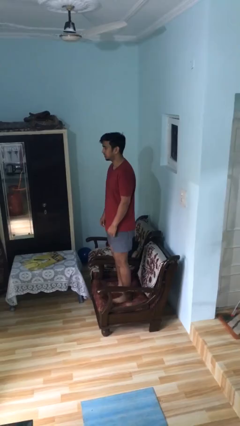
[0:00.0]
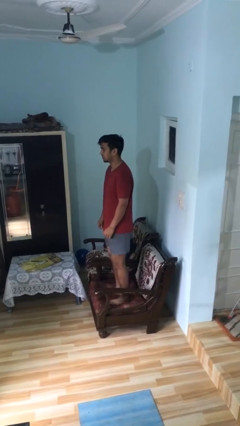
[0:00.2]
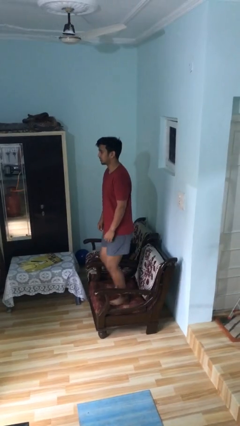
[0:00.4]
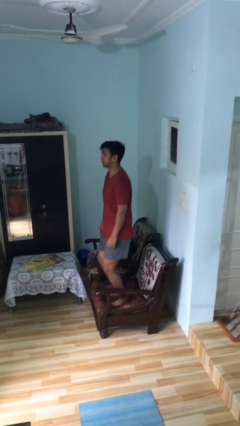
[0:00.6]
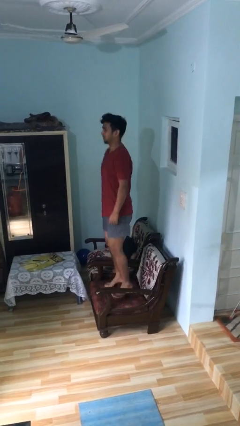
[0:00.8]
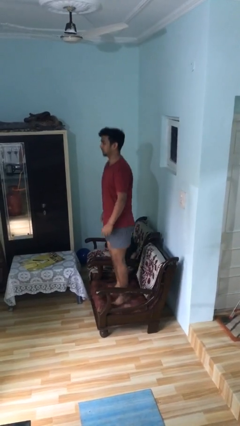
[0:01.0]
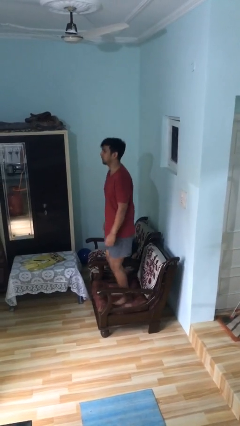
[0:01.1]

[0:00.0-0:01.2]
person jumps on couch

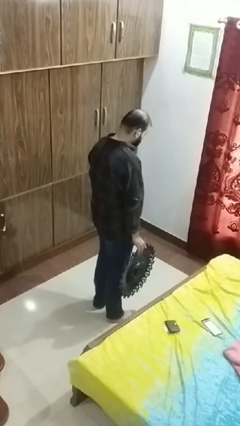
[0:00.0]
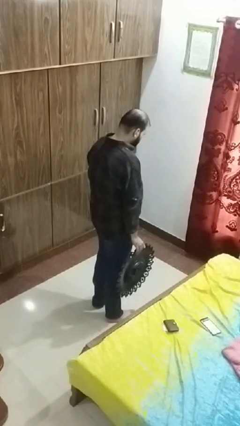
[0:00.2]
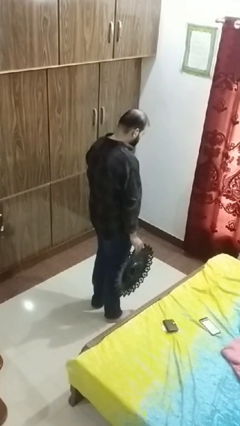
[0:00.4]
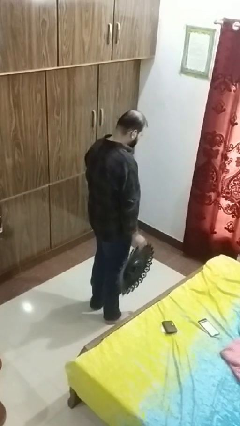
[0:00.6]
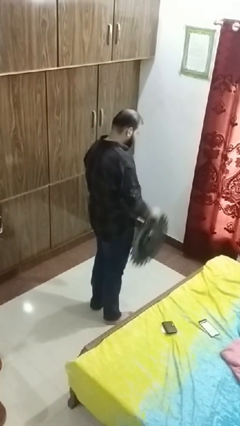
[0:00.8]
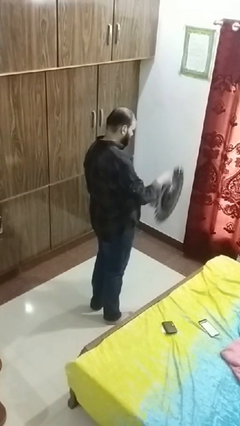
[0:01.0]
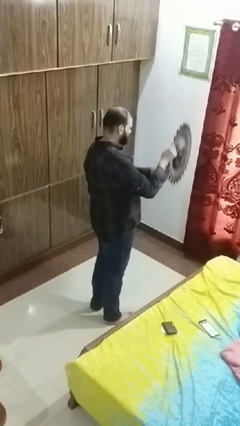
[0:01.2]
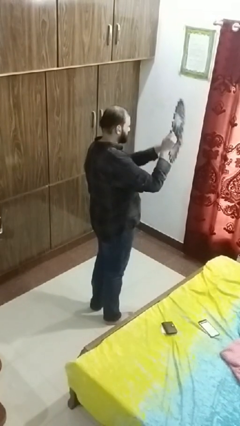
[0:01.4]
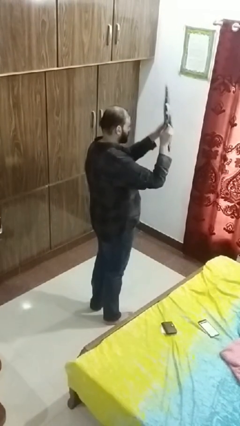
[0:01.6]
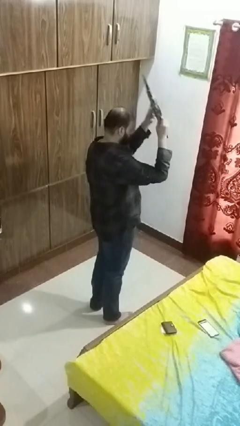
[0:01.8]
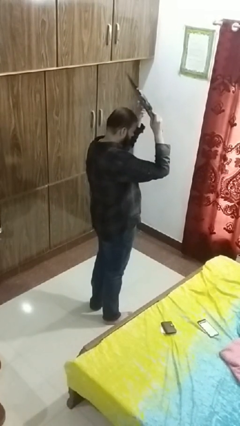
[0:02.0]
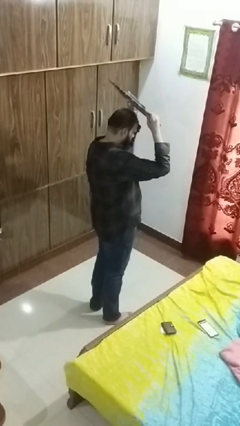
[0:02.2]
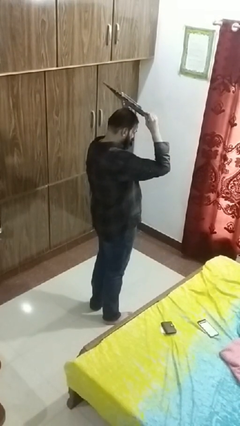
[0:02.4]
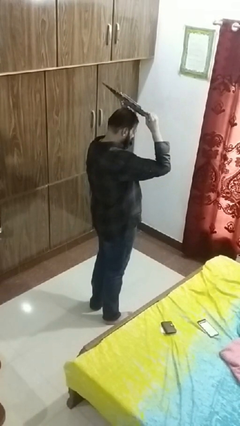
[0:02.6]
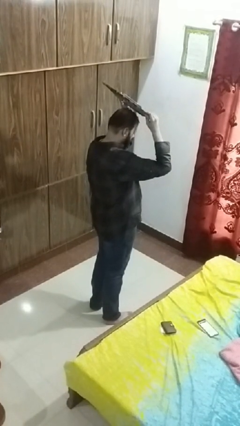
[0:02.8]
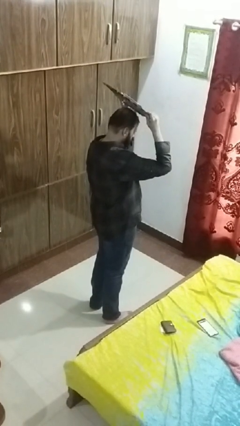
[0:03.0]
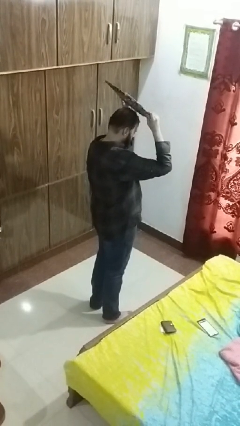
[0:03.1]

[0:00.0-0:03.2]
person holds object above head

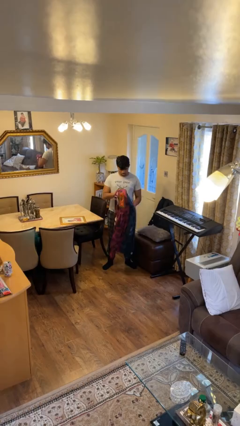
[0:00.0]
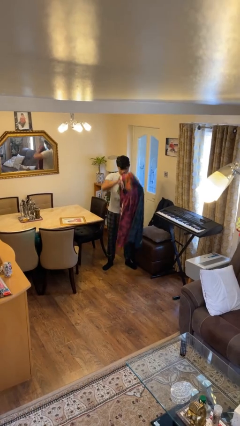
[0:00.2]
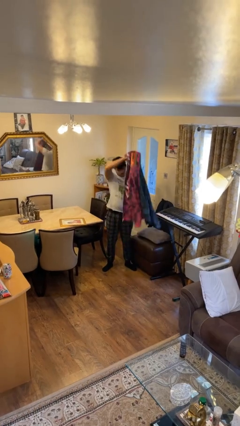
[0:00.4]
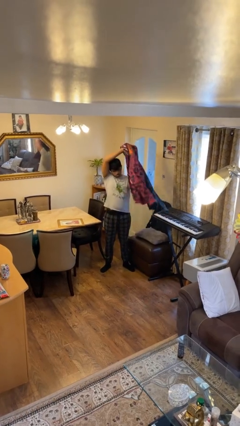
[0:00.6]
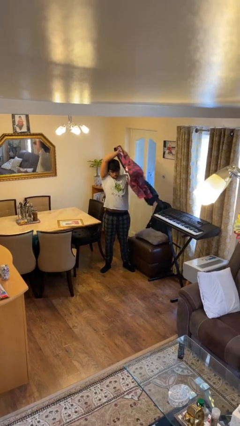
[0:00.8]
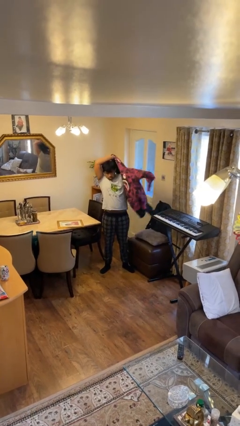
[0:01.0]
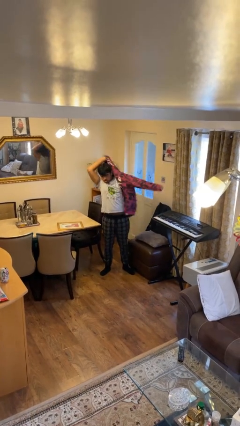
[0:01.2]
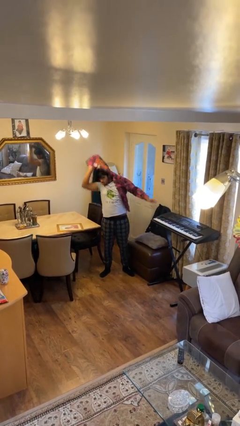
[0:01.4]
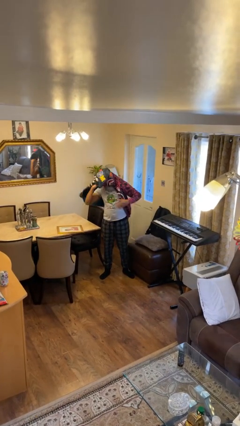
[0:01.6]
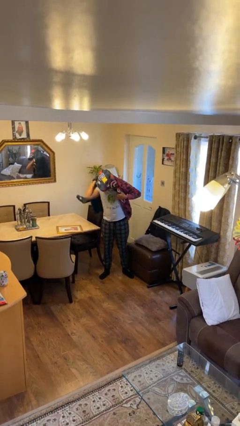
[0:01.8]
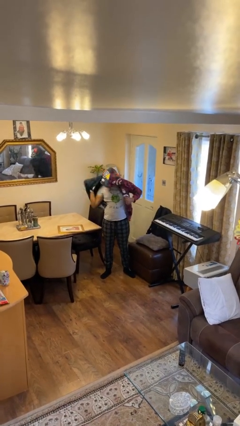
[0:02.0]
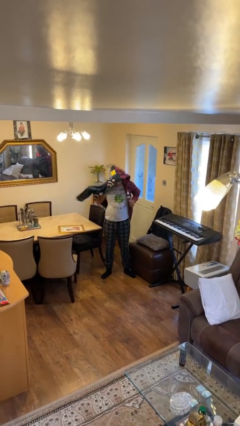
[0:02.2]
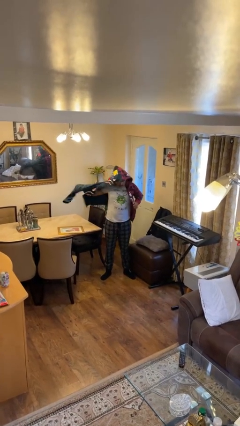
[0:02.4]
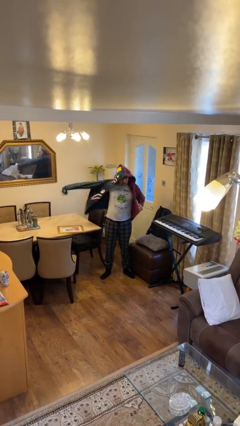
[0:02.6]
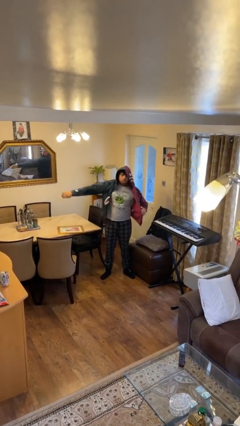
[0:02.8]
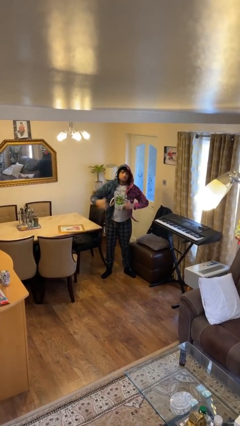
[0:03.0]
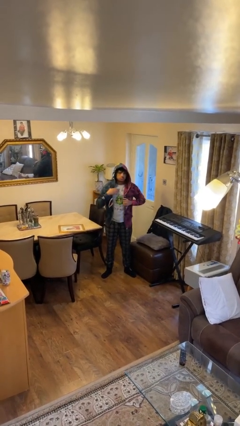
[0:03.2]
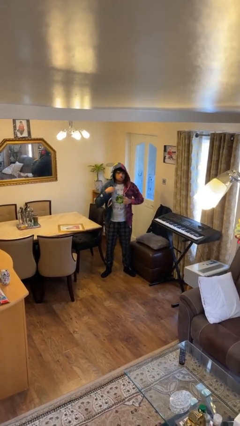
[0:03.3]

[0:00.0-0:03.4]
person puts on hoodie

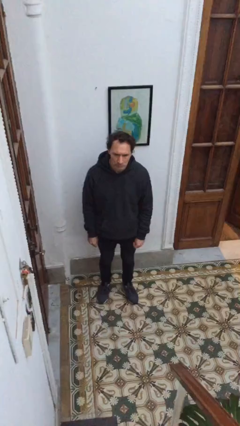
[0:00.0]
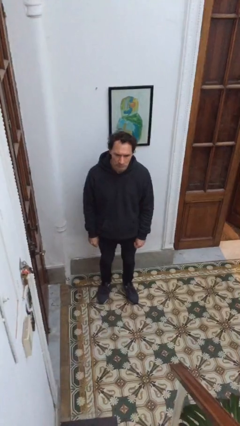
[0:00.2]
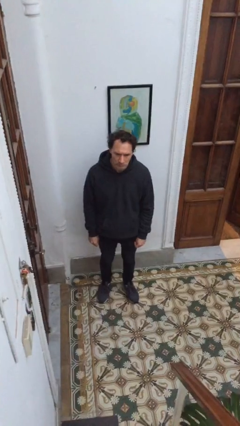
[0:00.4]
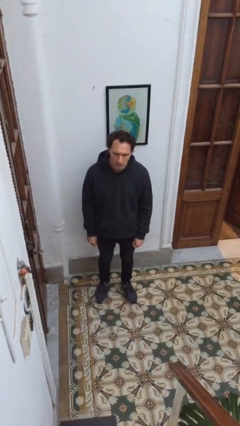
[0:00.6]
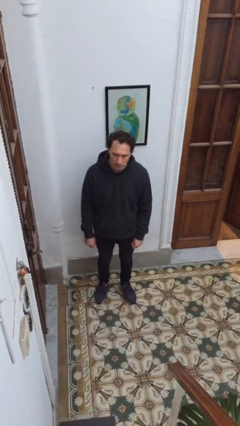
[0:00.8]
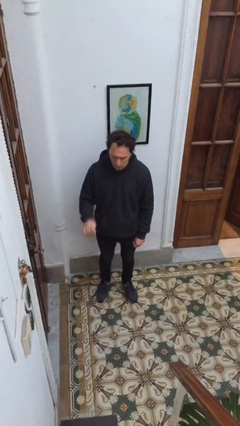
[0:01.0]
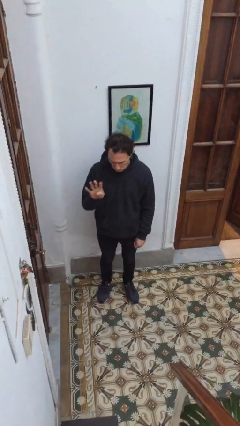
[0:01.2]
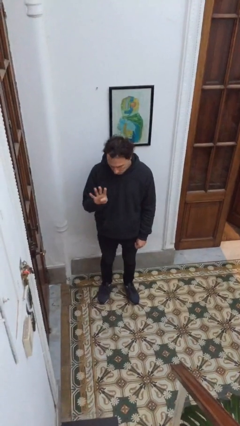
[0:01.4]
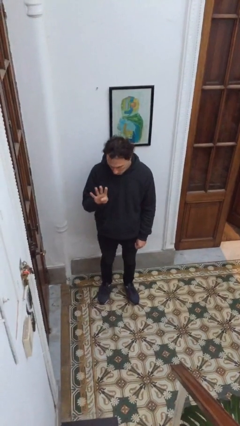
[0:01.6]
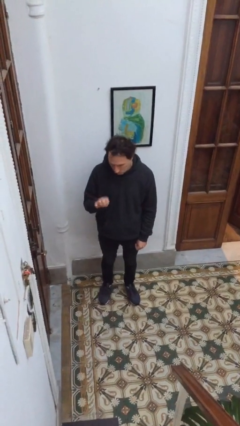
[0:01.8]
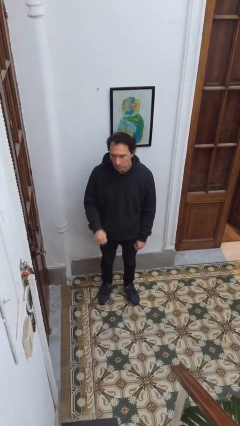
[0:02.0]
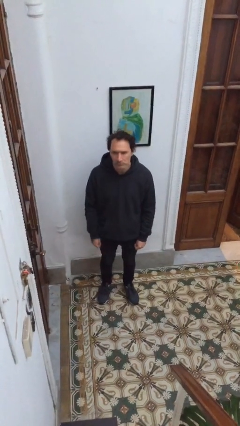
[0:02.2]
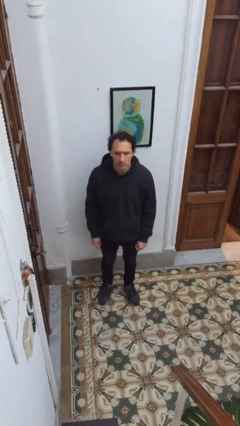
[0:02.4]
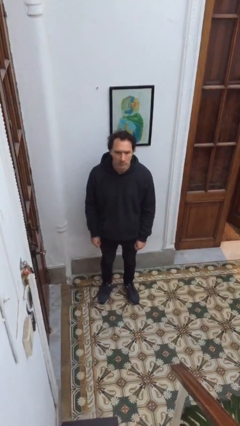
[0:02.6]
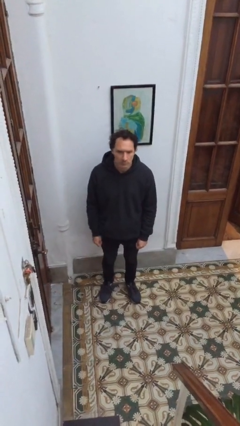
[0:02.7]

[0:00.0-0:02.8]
person gestures number four

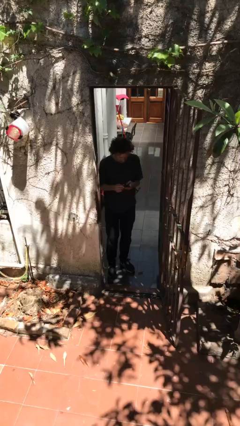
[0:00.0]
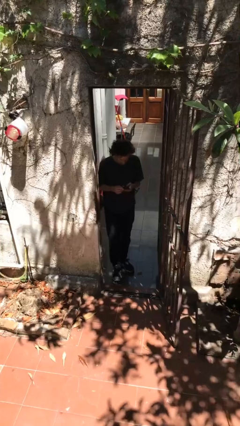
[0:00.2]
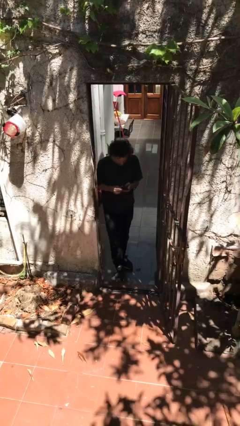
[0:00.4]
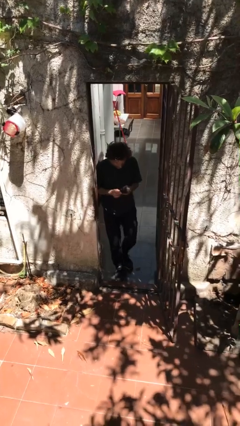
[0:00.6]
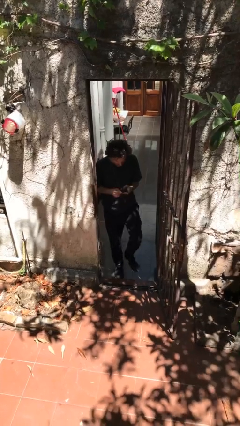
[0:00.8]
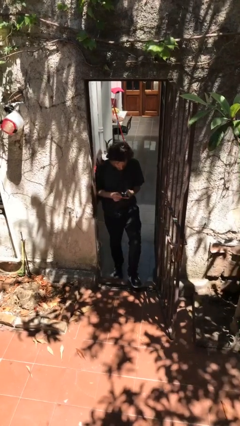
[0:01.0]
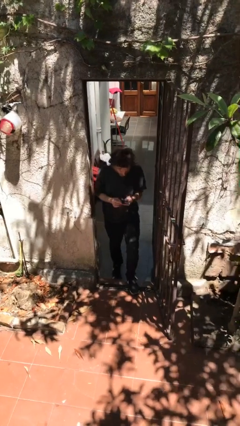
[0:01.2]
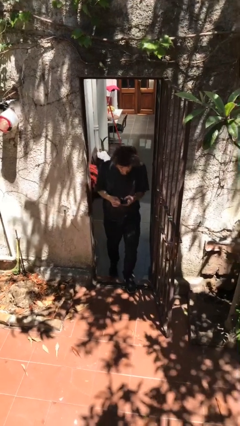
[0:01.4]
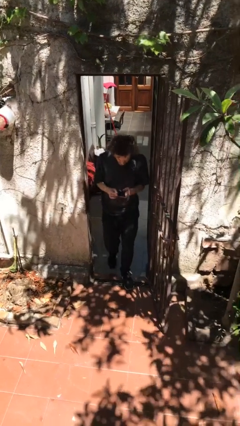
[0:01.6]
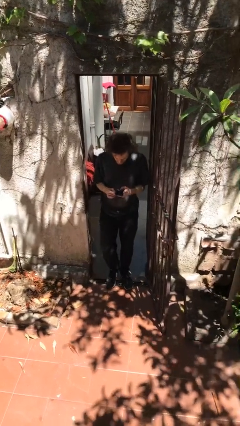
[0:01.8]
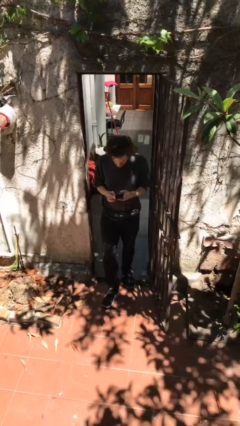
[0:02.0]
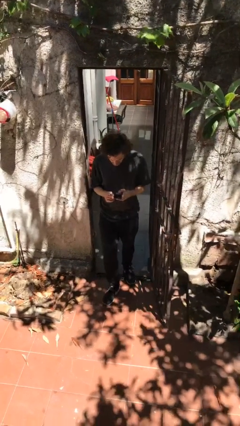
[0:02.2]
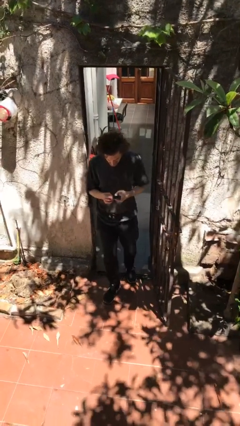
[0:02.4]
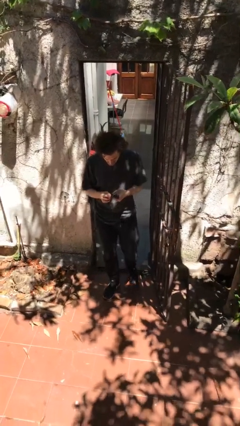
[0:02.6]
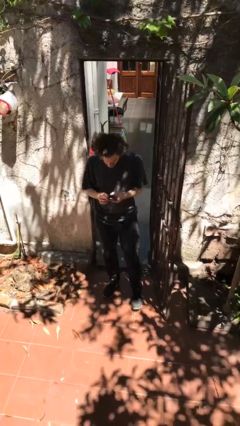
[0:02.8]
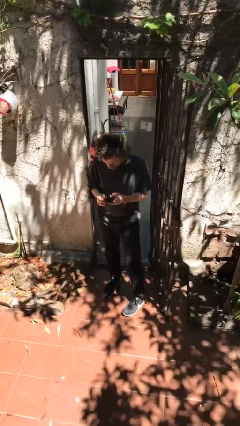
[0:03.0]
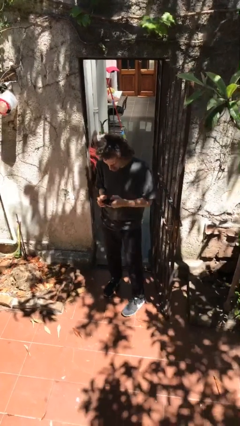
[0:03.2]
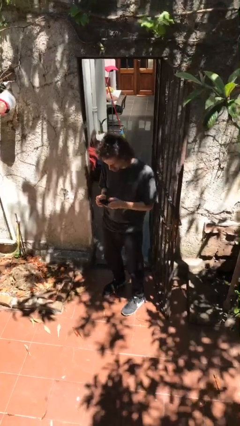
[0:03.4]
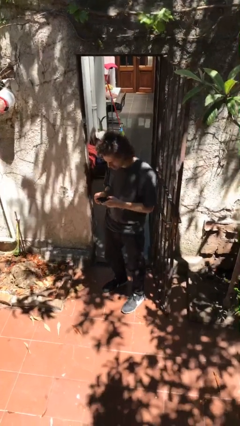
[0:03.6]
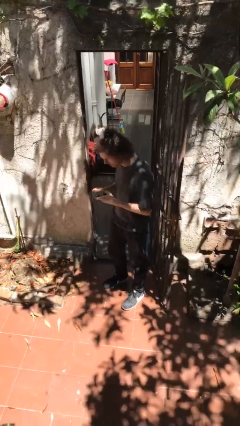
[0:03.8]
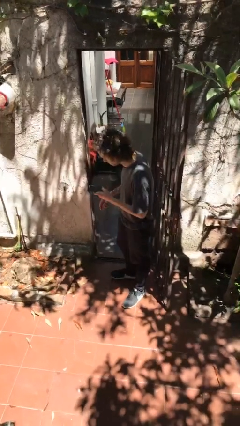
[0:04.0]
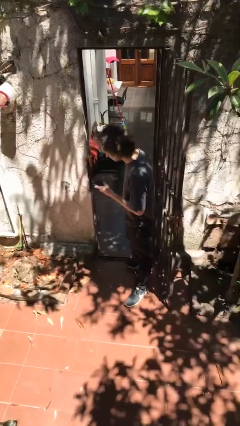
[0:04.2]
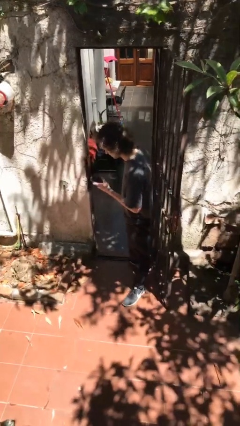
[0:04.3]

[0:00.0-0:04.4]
person enters scene through structure

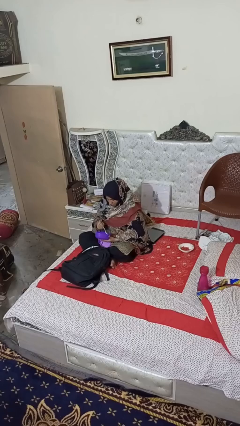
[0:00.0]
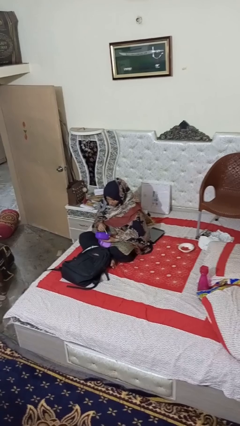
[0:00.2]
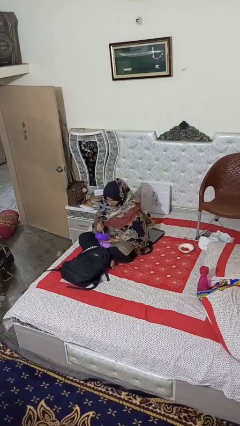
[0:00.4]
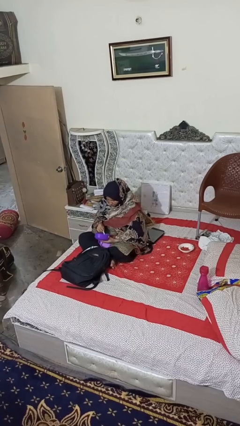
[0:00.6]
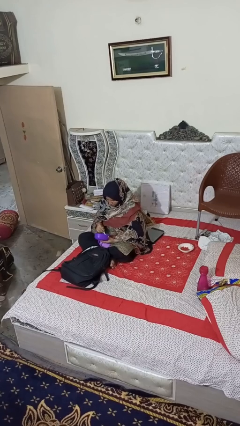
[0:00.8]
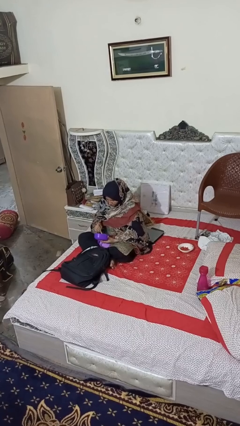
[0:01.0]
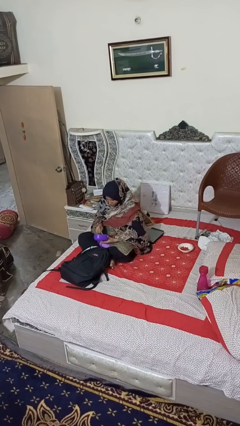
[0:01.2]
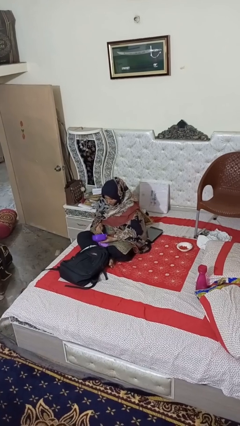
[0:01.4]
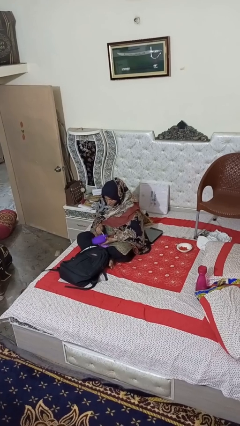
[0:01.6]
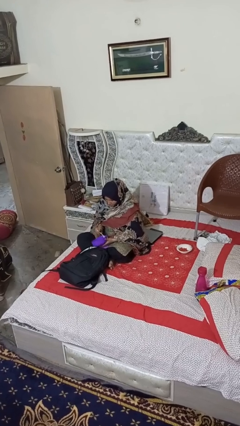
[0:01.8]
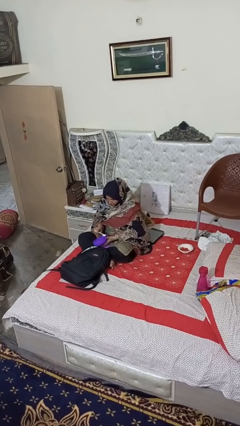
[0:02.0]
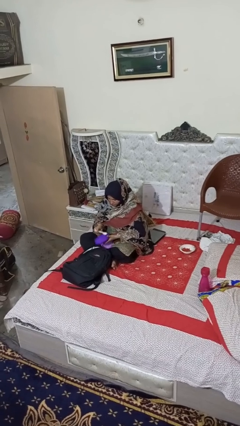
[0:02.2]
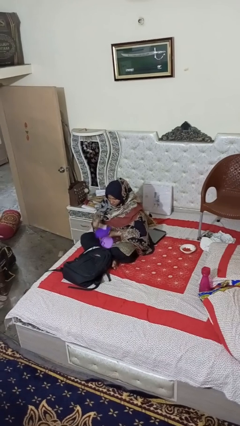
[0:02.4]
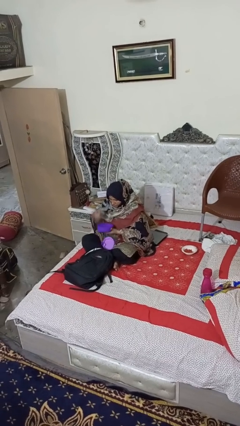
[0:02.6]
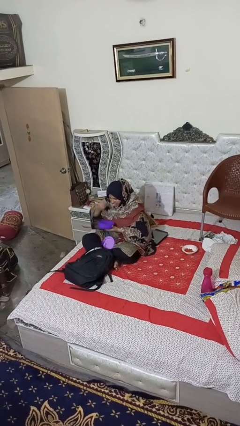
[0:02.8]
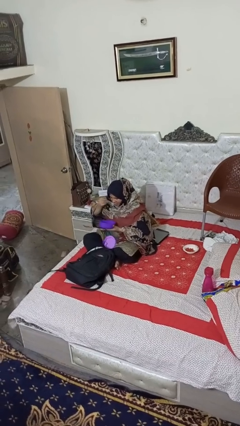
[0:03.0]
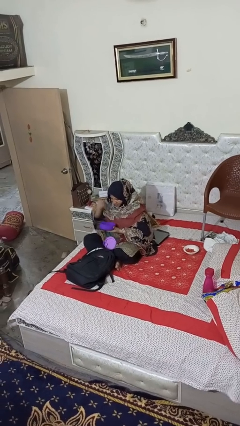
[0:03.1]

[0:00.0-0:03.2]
person eats snack from bag
